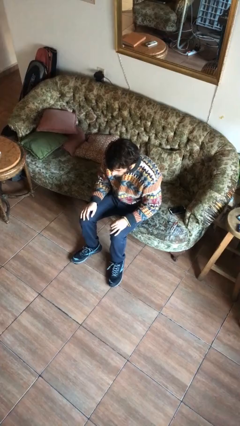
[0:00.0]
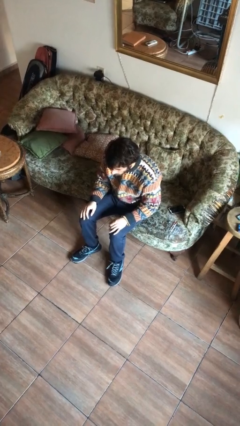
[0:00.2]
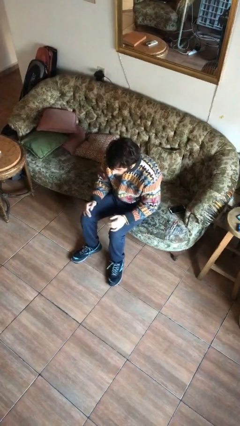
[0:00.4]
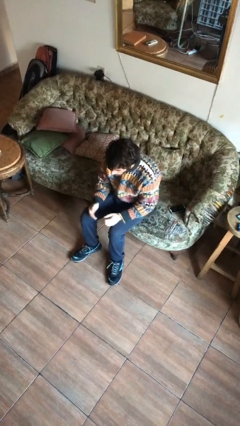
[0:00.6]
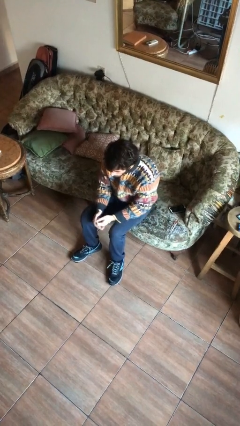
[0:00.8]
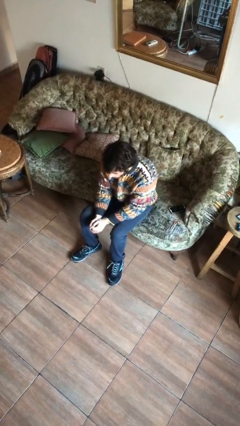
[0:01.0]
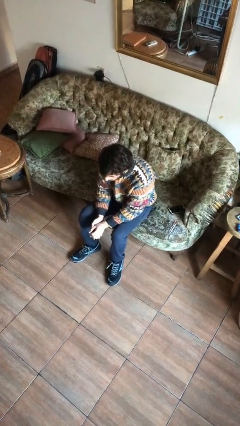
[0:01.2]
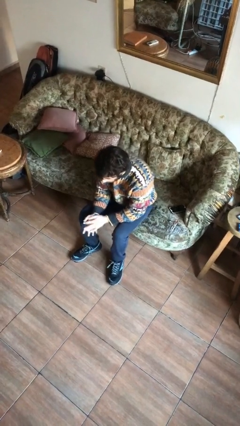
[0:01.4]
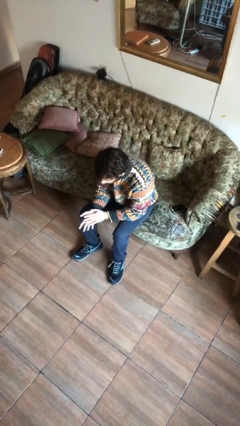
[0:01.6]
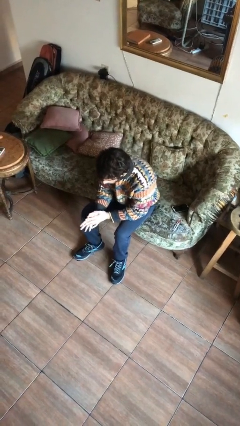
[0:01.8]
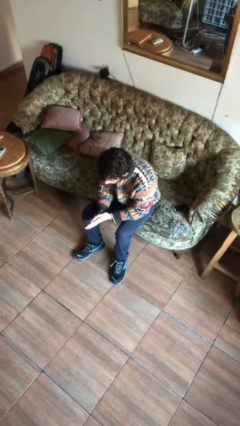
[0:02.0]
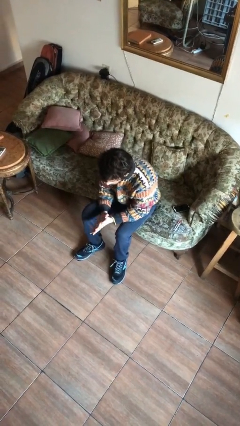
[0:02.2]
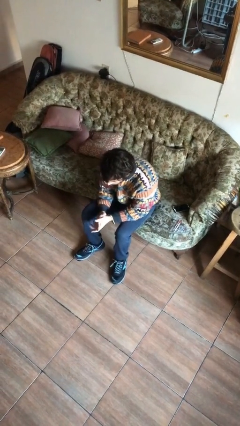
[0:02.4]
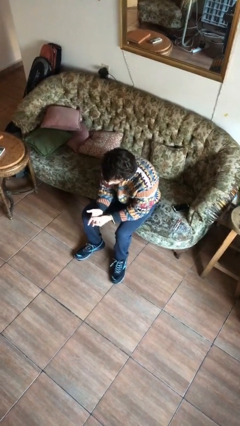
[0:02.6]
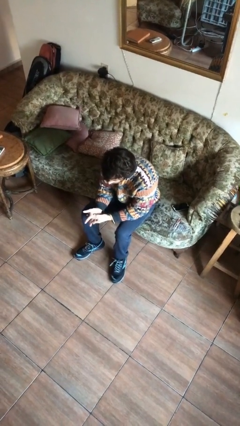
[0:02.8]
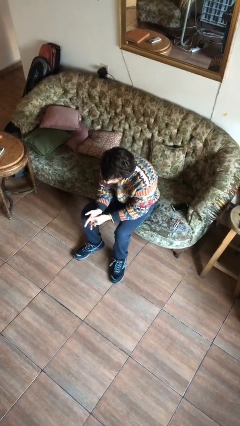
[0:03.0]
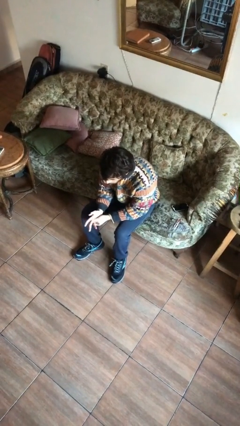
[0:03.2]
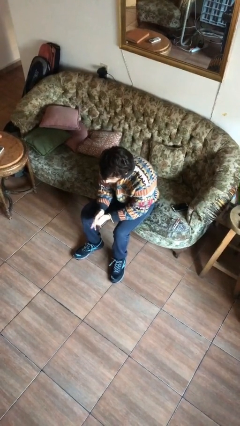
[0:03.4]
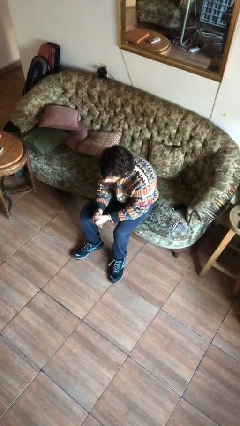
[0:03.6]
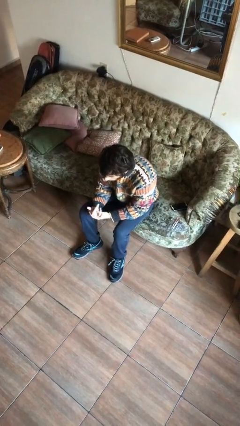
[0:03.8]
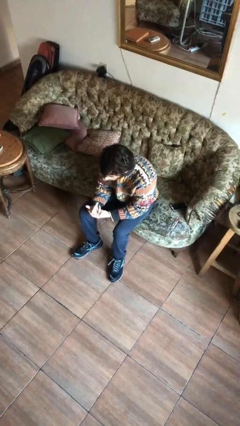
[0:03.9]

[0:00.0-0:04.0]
person looks at hands in lap

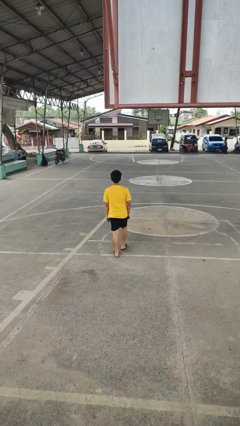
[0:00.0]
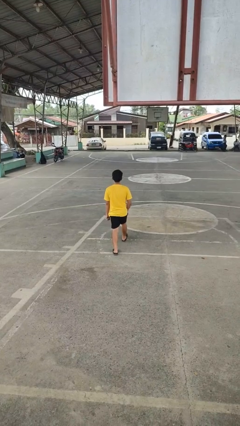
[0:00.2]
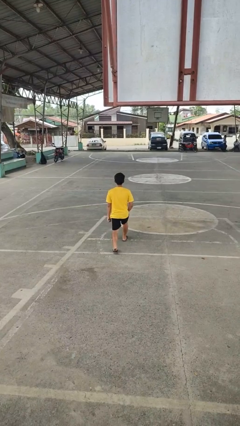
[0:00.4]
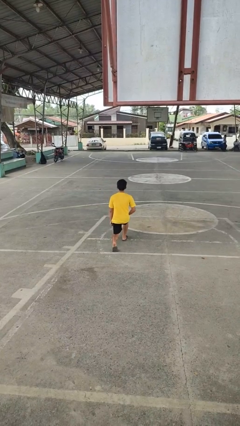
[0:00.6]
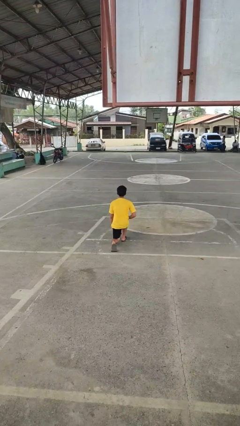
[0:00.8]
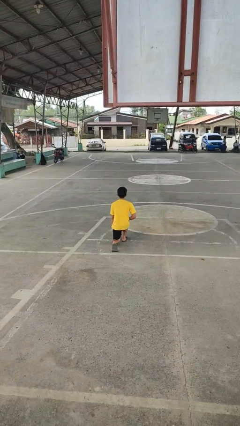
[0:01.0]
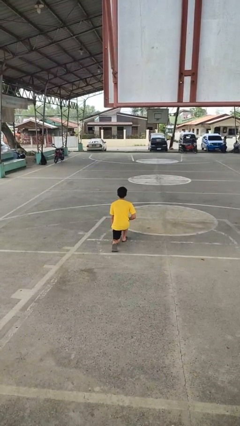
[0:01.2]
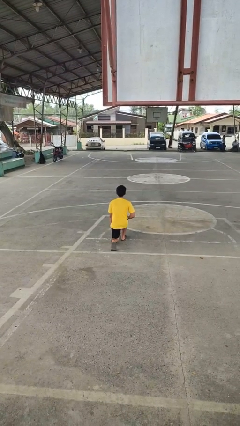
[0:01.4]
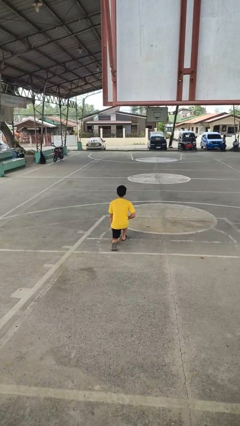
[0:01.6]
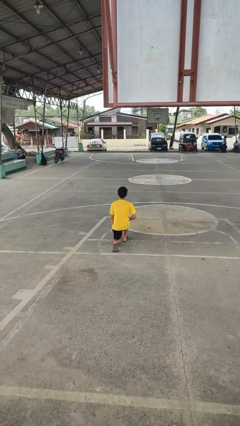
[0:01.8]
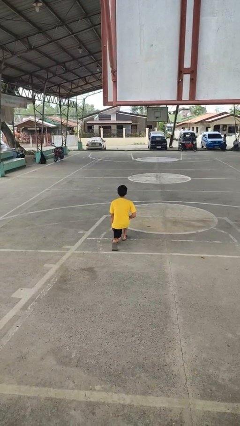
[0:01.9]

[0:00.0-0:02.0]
person kneels

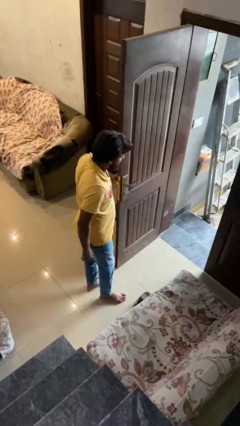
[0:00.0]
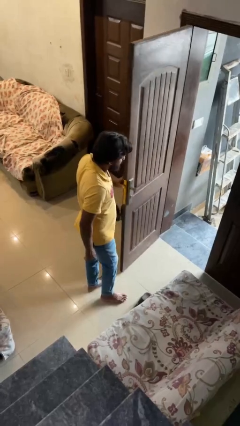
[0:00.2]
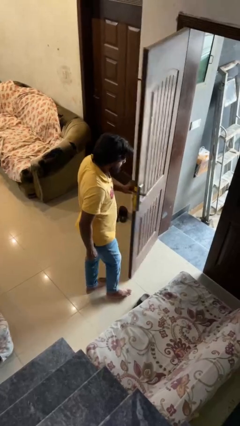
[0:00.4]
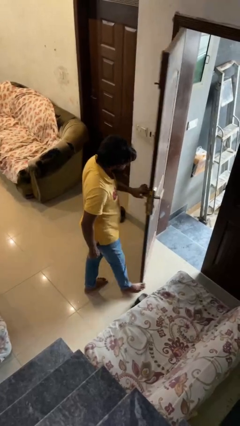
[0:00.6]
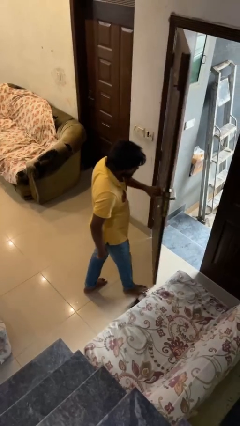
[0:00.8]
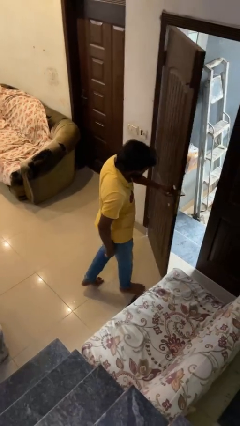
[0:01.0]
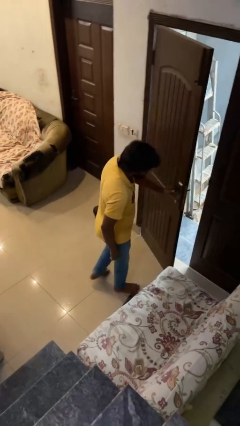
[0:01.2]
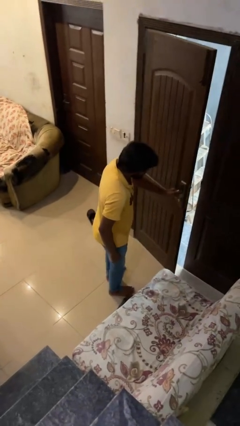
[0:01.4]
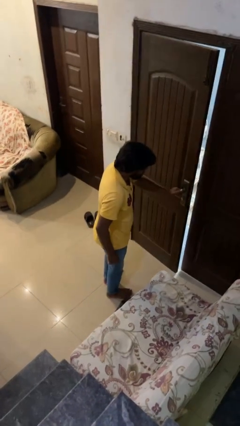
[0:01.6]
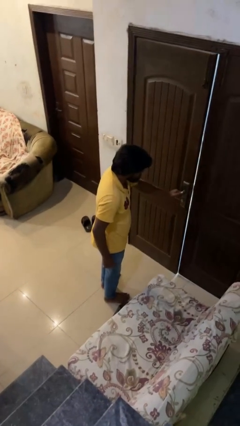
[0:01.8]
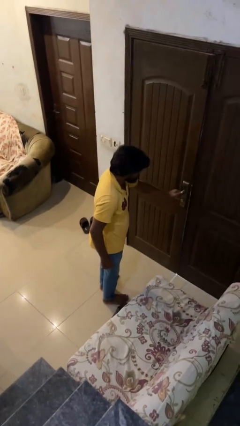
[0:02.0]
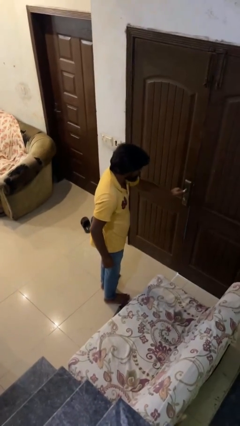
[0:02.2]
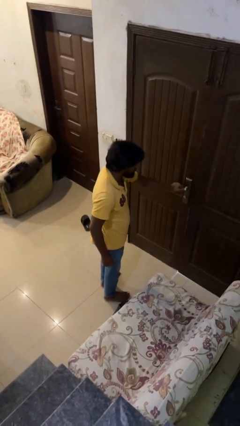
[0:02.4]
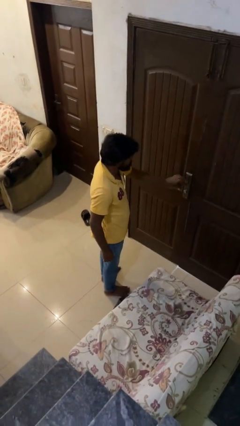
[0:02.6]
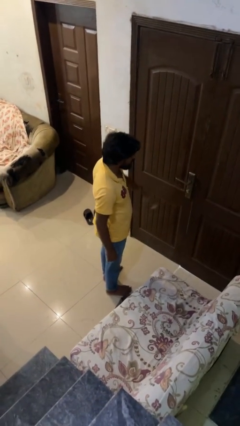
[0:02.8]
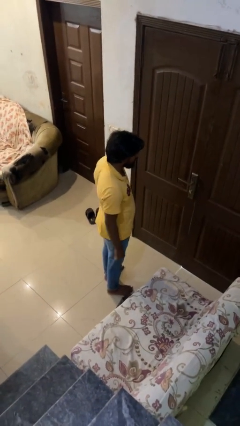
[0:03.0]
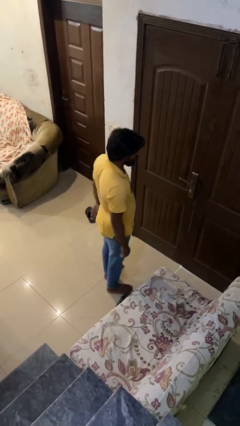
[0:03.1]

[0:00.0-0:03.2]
person closes facility door

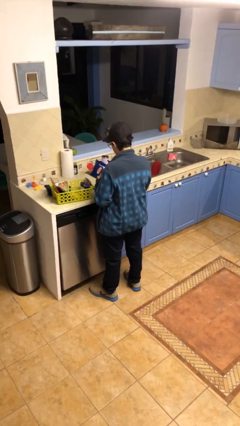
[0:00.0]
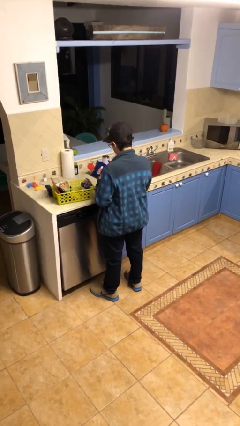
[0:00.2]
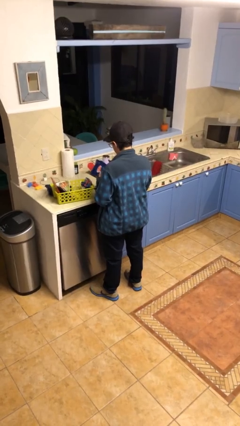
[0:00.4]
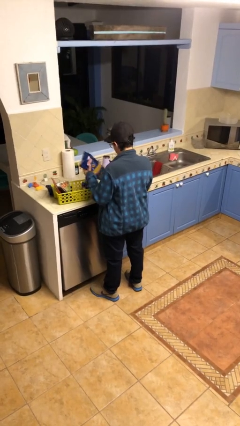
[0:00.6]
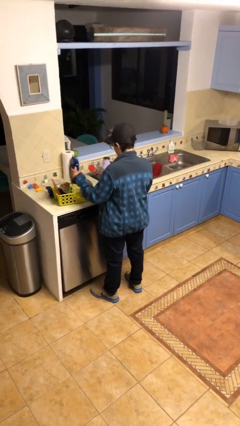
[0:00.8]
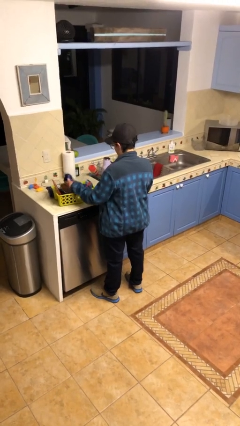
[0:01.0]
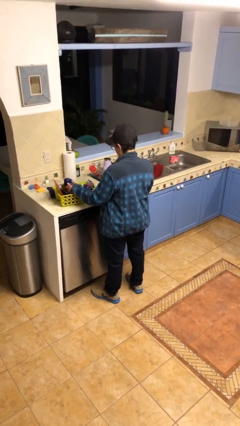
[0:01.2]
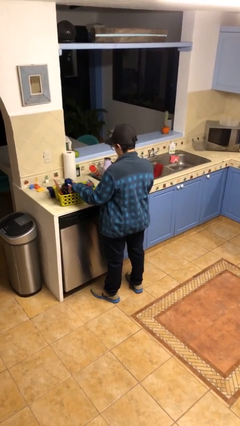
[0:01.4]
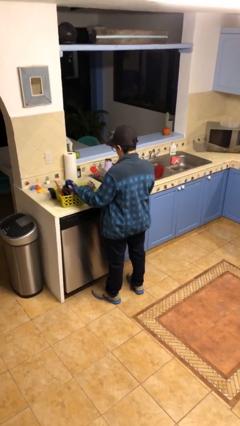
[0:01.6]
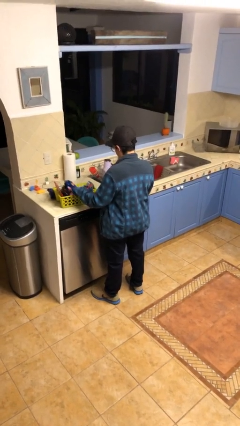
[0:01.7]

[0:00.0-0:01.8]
person puts object into basket

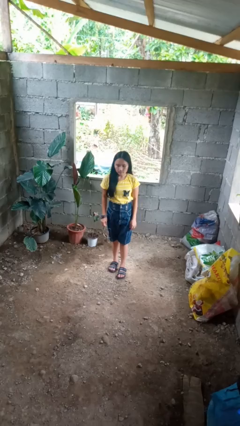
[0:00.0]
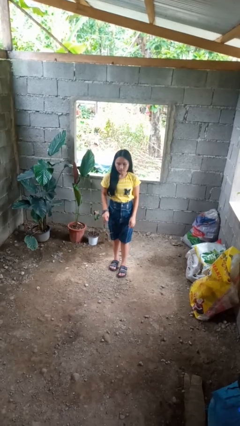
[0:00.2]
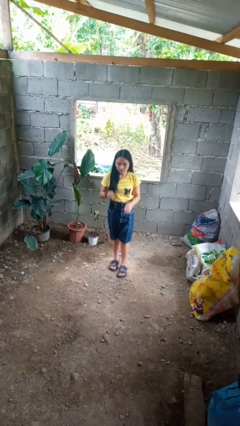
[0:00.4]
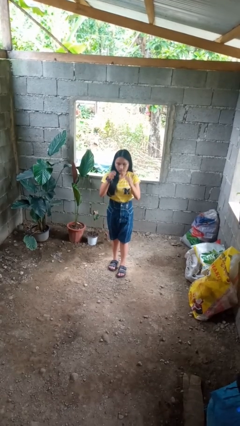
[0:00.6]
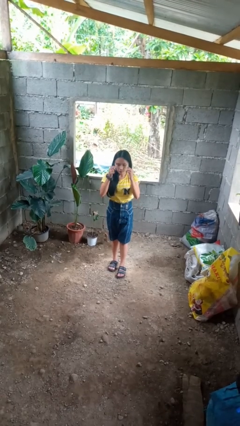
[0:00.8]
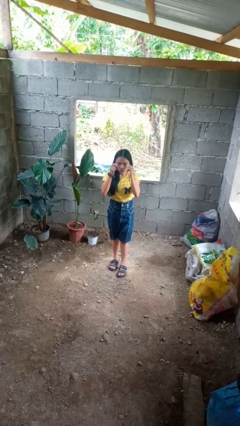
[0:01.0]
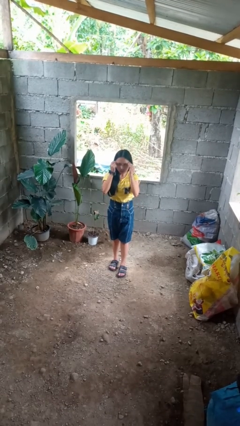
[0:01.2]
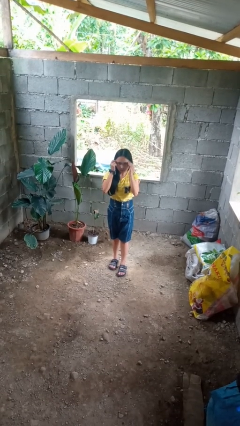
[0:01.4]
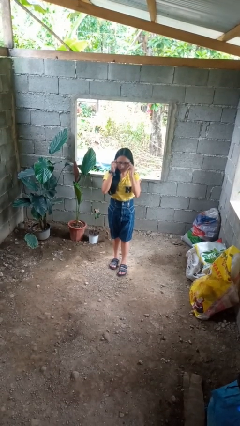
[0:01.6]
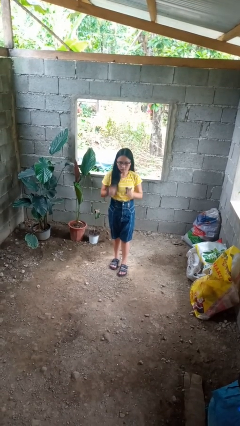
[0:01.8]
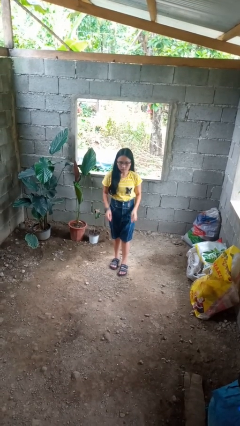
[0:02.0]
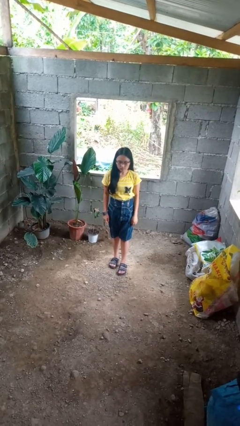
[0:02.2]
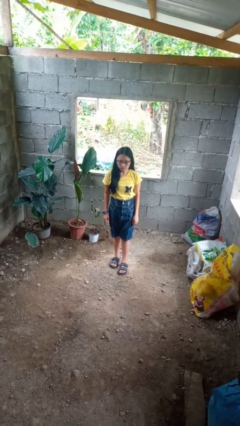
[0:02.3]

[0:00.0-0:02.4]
person puts on glasses

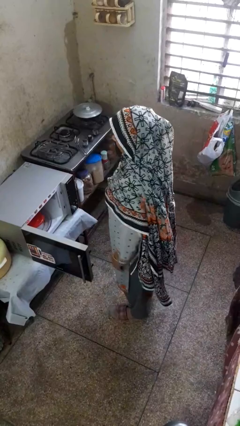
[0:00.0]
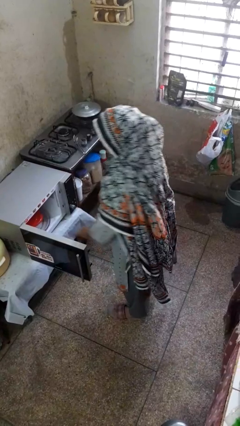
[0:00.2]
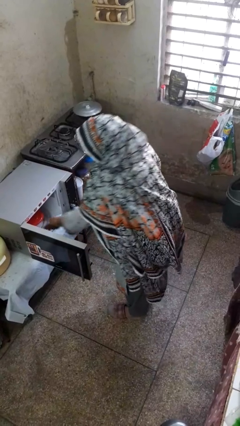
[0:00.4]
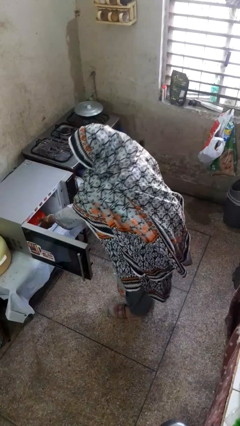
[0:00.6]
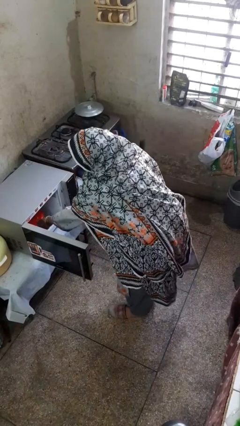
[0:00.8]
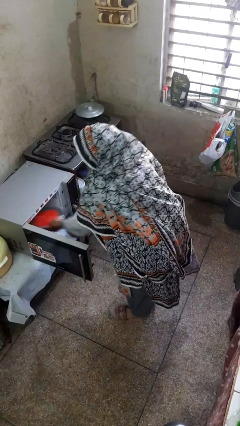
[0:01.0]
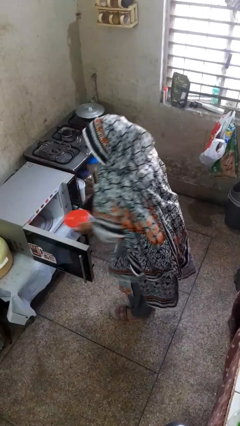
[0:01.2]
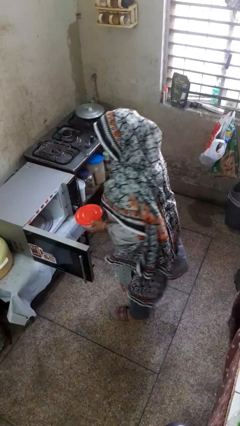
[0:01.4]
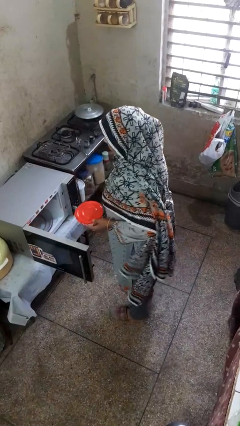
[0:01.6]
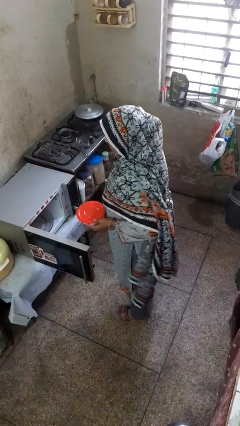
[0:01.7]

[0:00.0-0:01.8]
person takes object from microwave

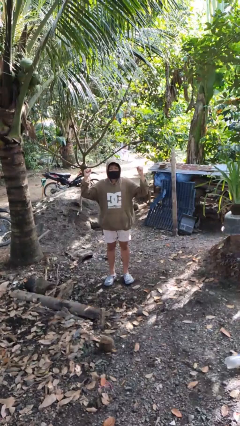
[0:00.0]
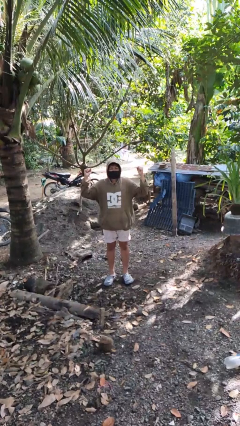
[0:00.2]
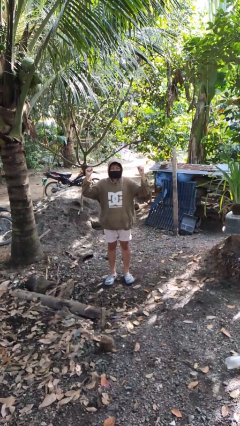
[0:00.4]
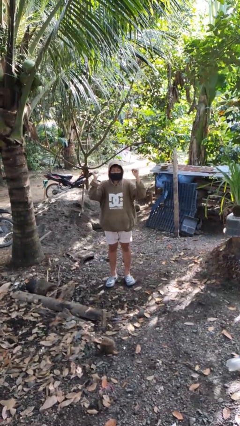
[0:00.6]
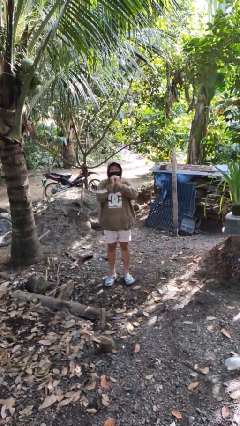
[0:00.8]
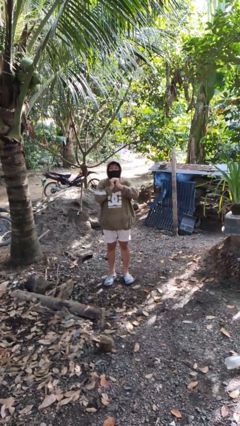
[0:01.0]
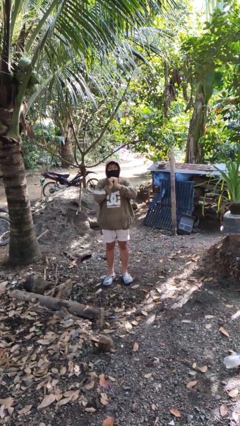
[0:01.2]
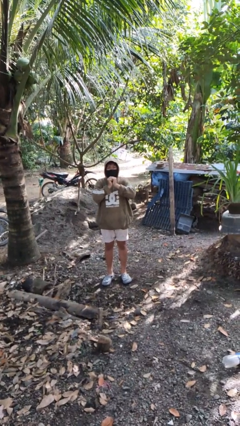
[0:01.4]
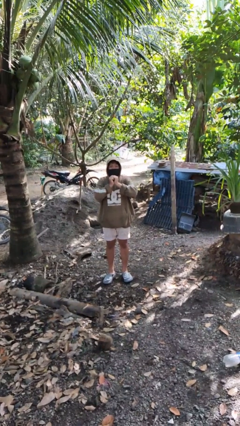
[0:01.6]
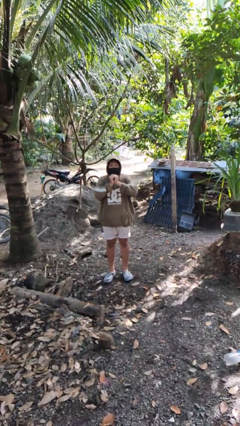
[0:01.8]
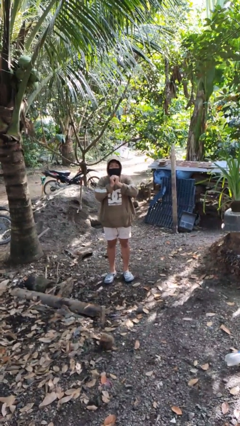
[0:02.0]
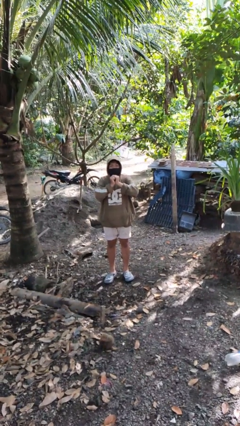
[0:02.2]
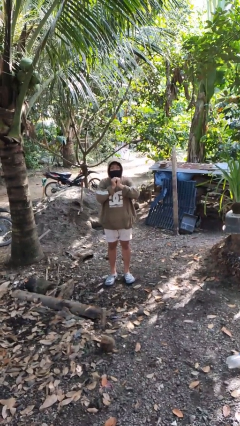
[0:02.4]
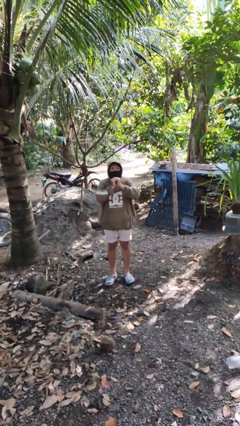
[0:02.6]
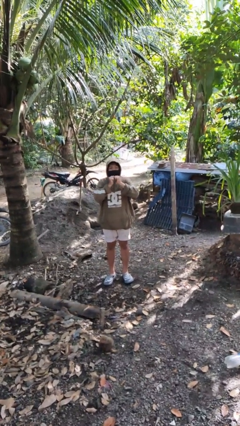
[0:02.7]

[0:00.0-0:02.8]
person gestures zoom in
